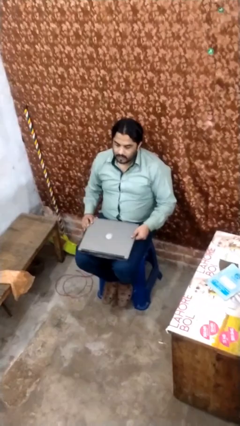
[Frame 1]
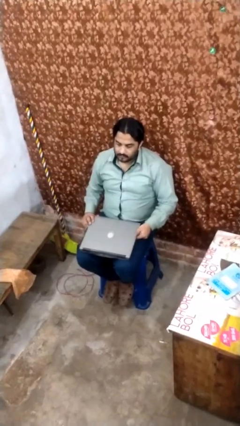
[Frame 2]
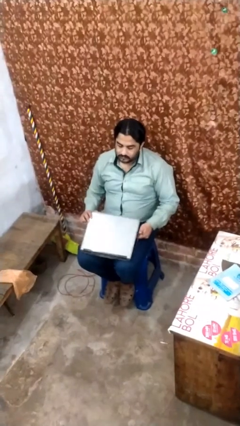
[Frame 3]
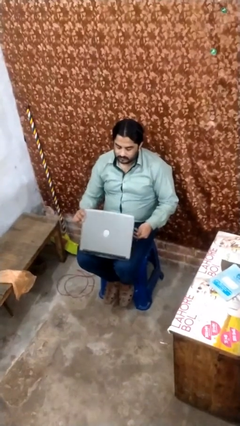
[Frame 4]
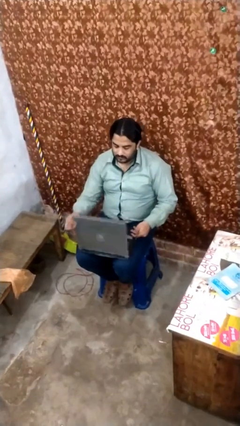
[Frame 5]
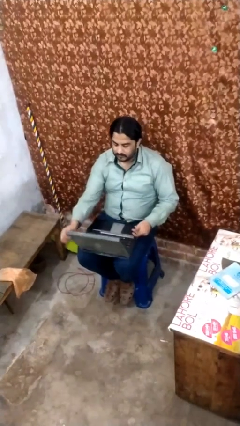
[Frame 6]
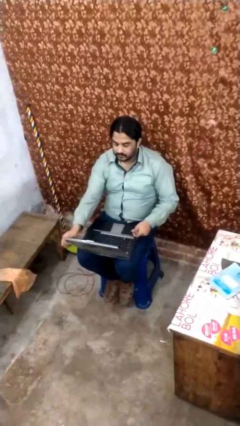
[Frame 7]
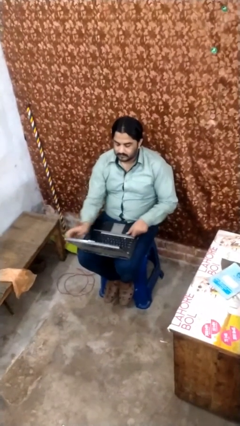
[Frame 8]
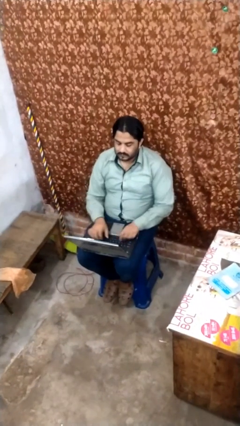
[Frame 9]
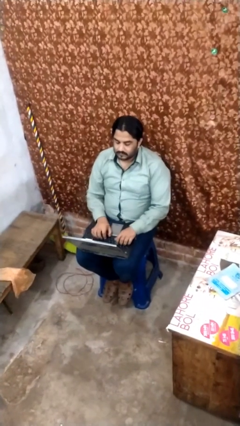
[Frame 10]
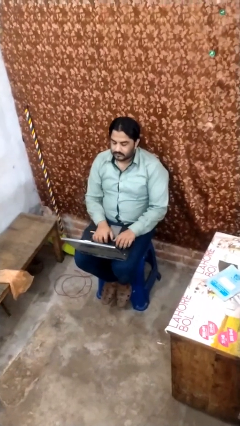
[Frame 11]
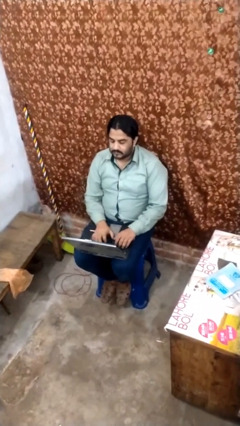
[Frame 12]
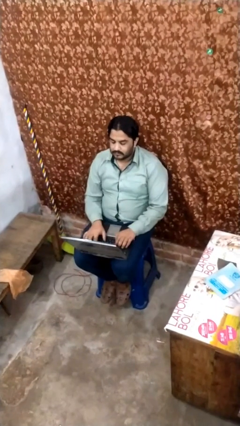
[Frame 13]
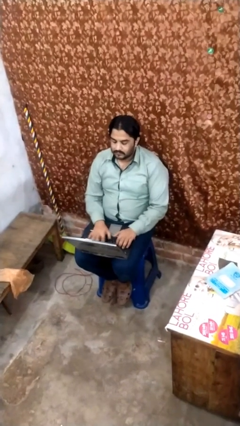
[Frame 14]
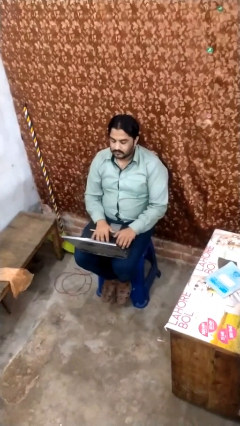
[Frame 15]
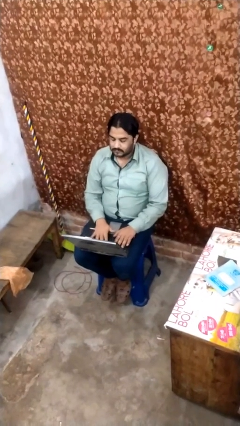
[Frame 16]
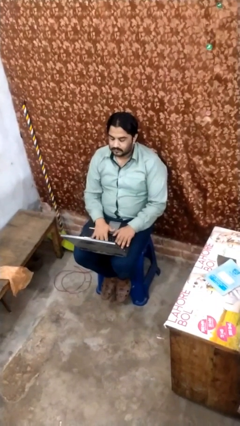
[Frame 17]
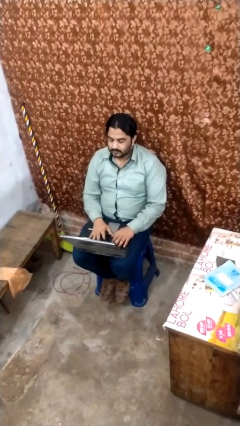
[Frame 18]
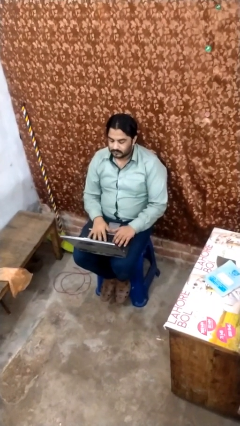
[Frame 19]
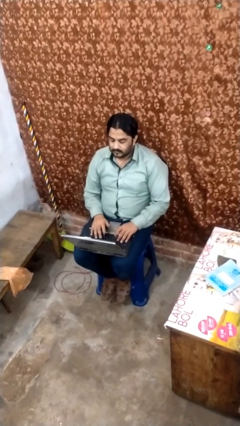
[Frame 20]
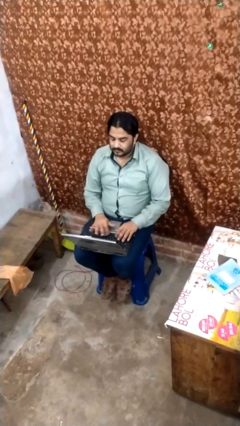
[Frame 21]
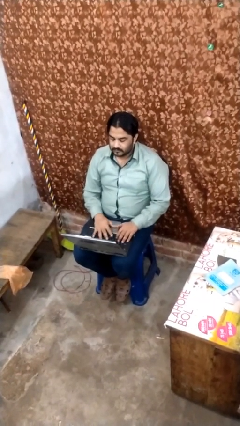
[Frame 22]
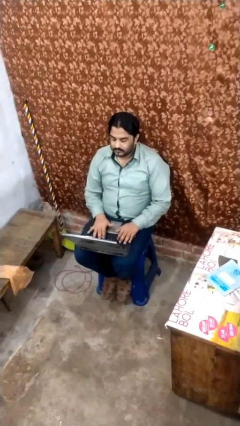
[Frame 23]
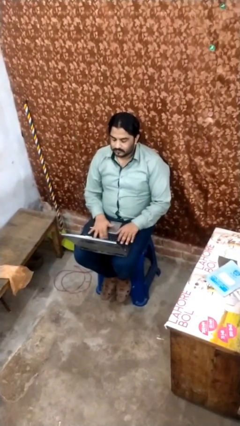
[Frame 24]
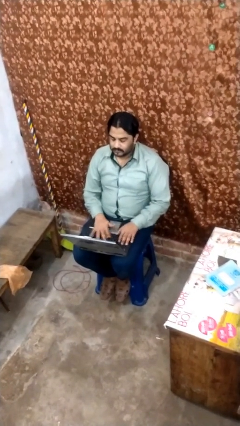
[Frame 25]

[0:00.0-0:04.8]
person interacts with laptop

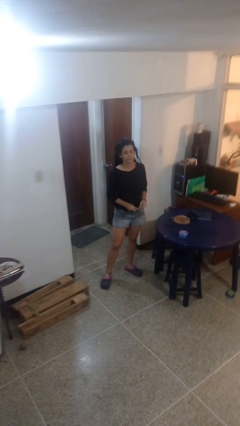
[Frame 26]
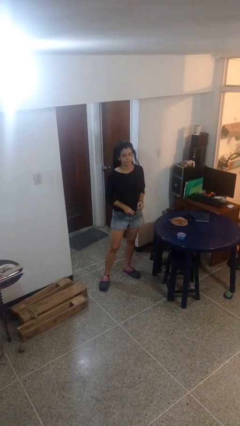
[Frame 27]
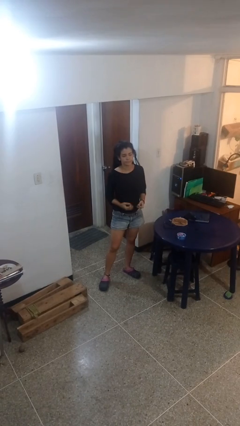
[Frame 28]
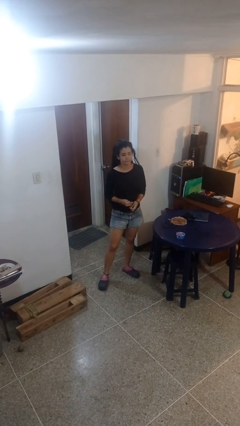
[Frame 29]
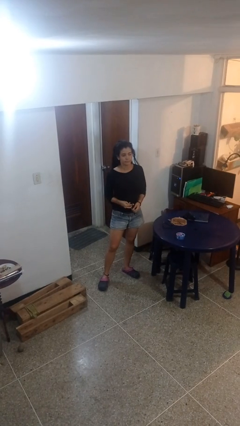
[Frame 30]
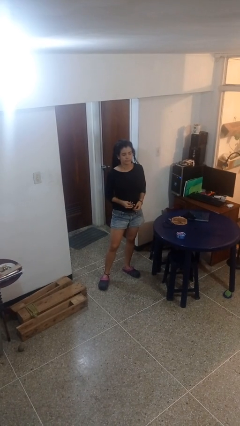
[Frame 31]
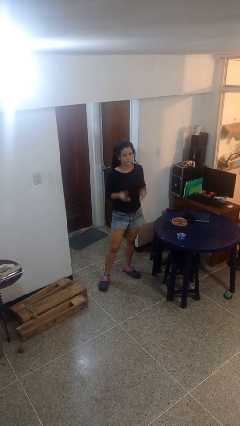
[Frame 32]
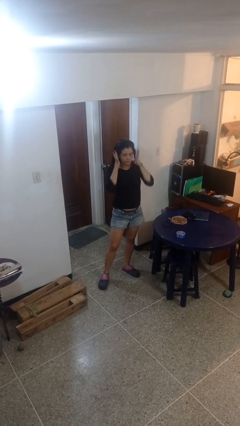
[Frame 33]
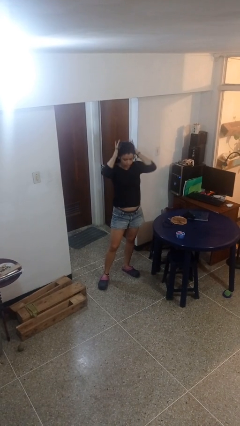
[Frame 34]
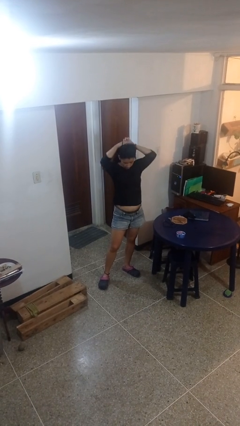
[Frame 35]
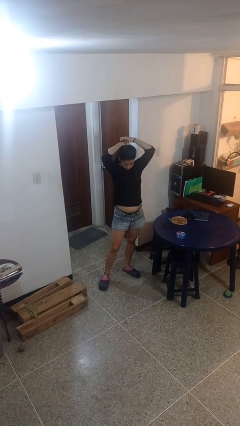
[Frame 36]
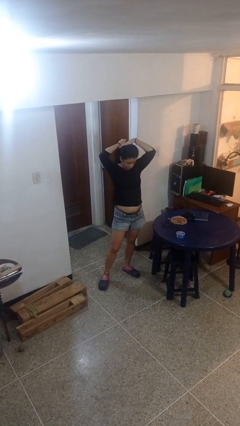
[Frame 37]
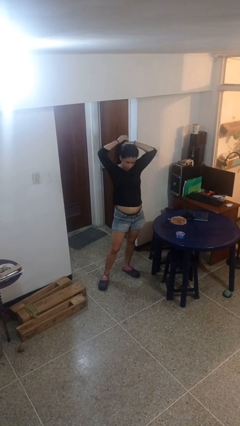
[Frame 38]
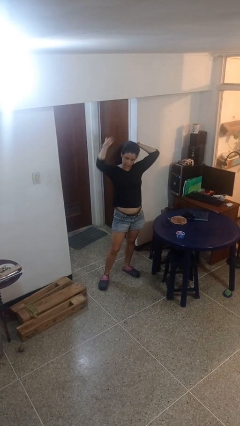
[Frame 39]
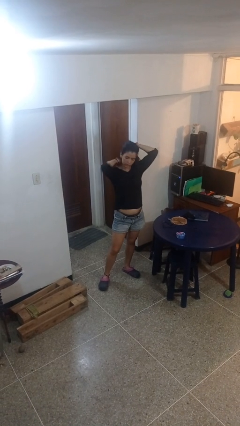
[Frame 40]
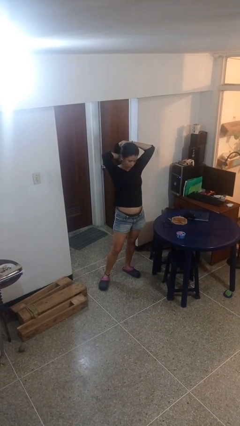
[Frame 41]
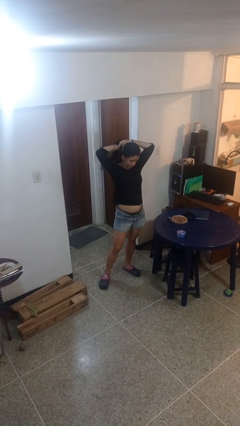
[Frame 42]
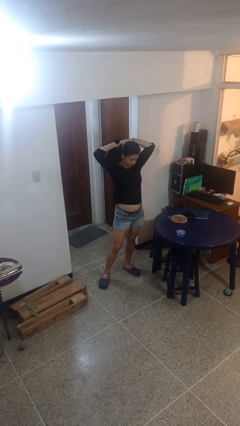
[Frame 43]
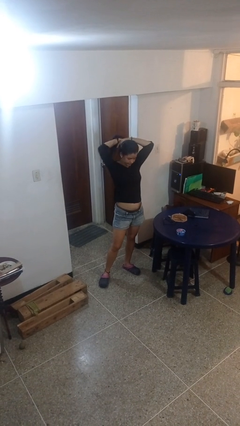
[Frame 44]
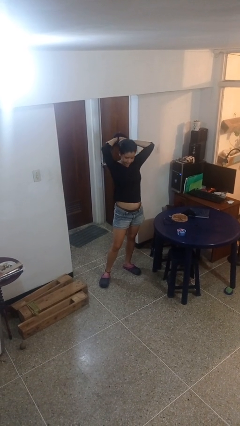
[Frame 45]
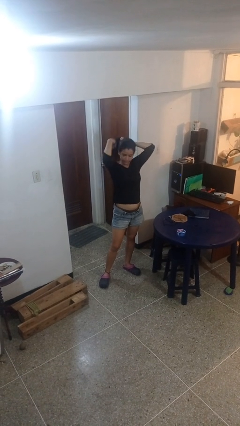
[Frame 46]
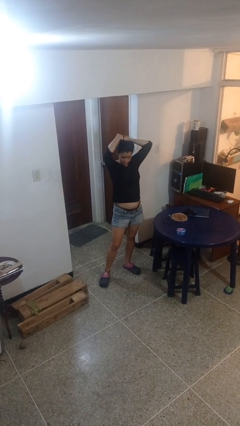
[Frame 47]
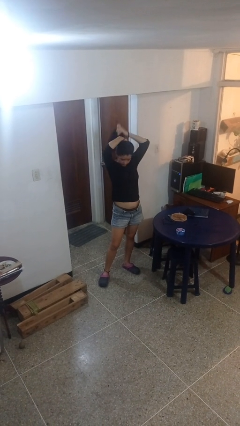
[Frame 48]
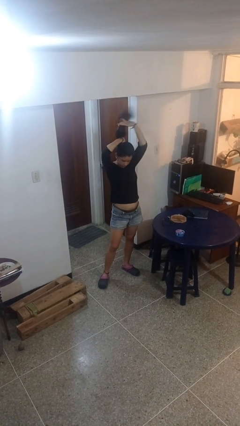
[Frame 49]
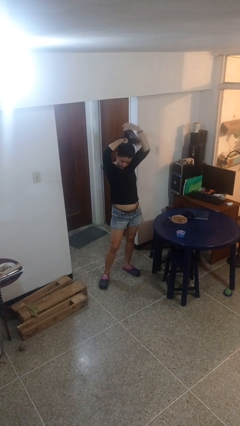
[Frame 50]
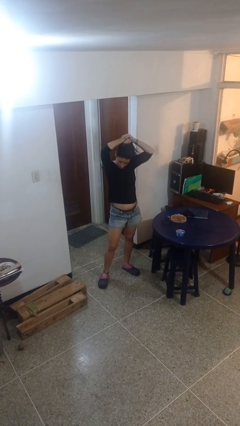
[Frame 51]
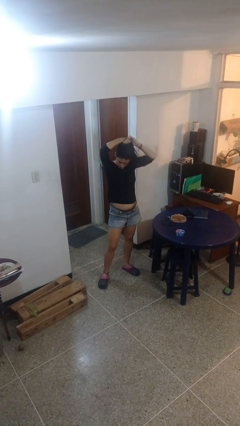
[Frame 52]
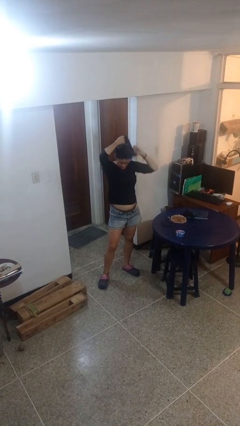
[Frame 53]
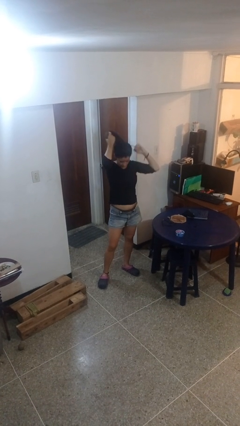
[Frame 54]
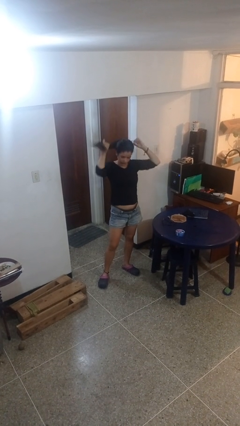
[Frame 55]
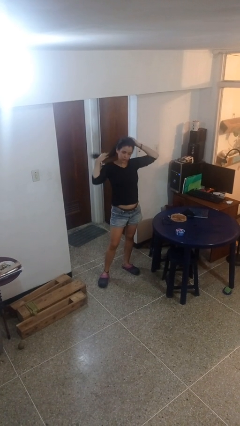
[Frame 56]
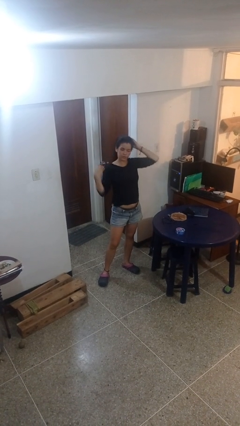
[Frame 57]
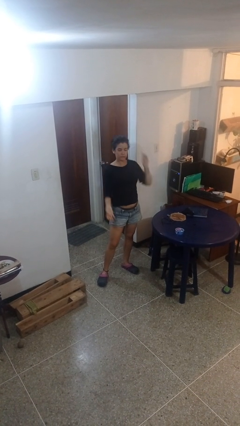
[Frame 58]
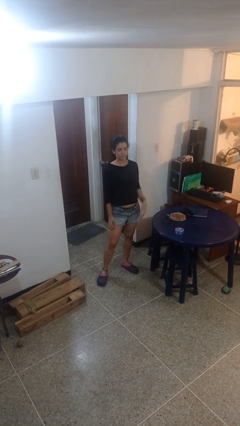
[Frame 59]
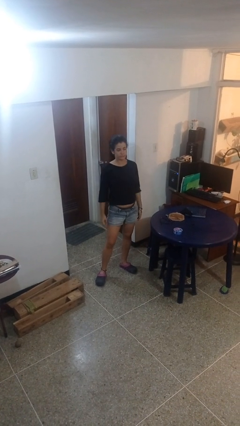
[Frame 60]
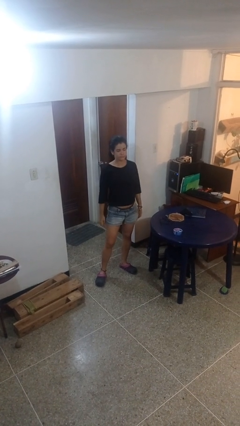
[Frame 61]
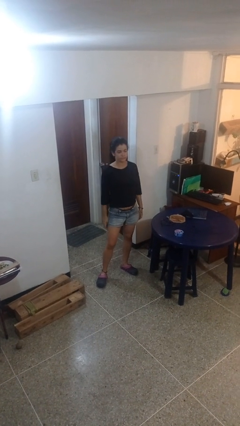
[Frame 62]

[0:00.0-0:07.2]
person puts hair in ponytail

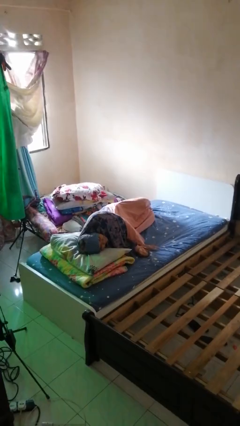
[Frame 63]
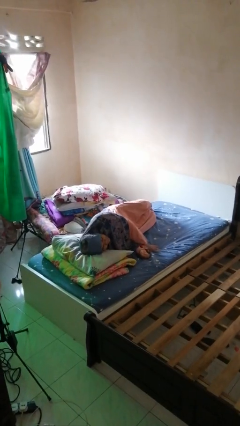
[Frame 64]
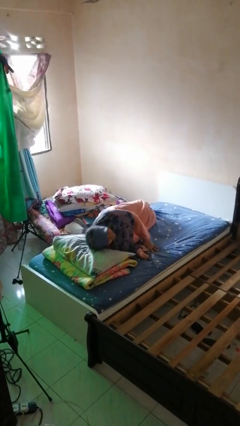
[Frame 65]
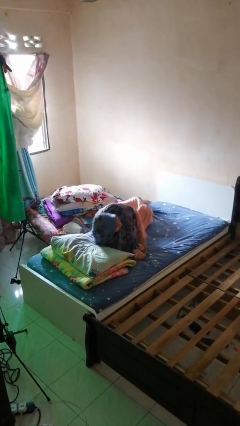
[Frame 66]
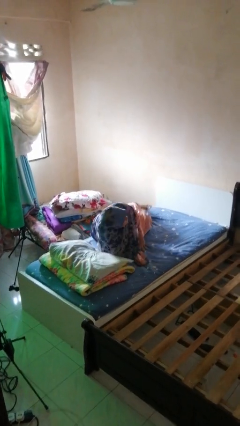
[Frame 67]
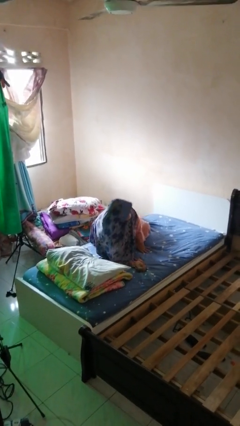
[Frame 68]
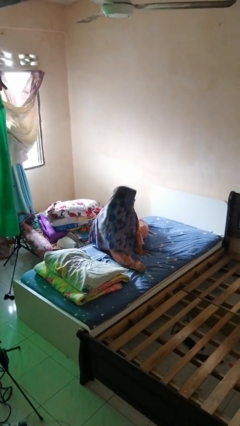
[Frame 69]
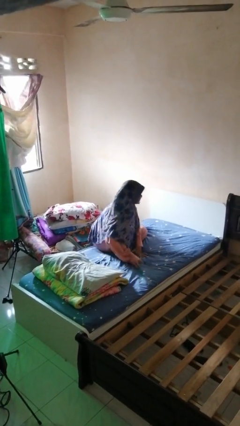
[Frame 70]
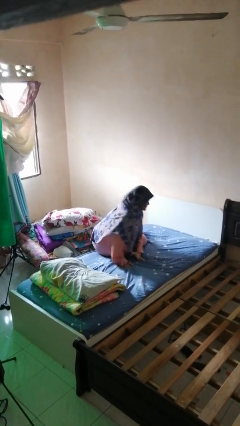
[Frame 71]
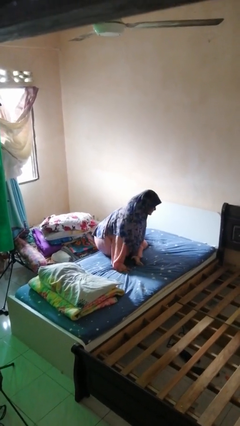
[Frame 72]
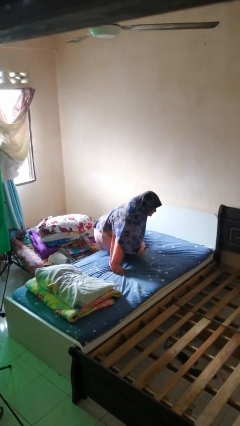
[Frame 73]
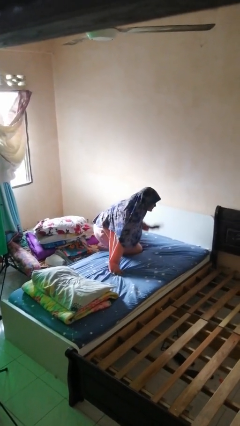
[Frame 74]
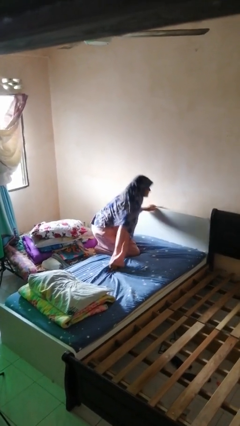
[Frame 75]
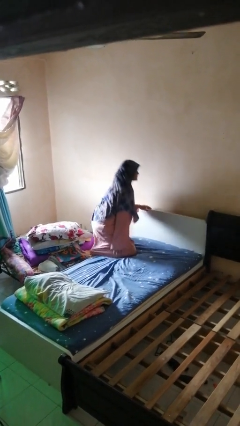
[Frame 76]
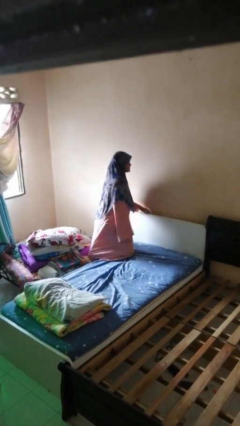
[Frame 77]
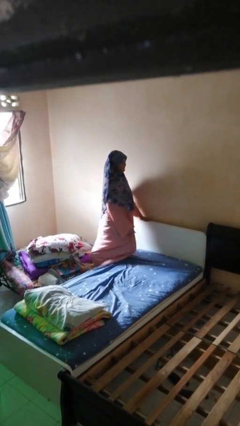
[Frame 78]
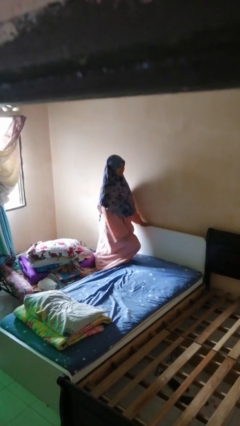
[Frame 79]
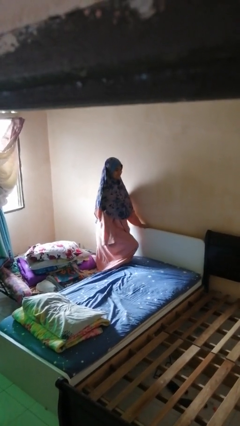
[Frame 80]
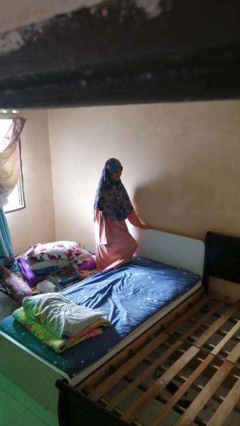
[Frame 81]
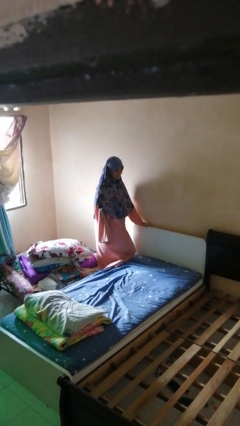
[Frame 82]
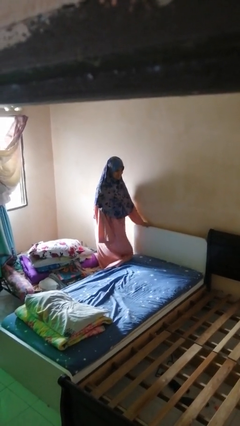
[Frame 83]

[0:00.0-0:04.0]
person stands up

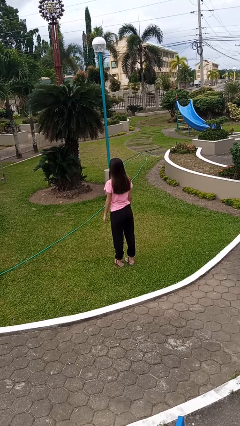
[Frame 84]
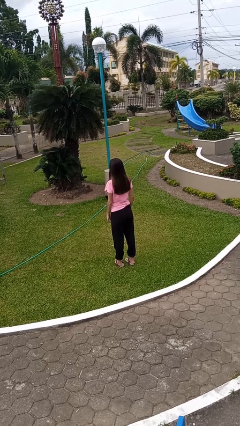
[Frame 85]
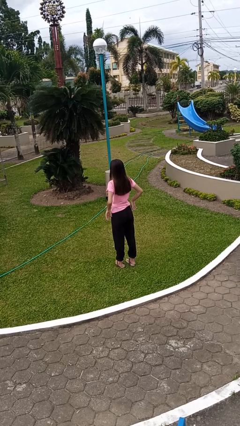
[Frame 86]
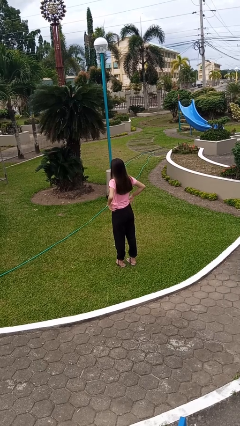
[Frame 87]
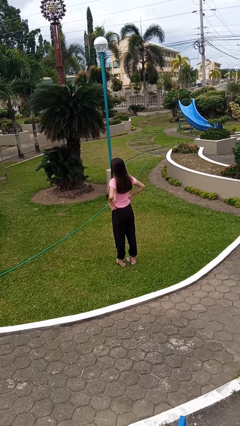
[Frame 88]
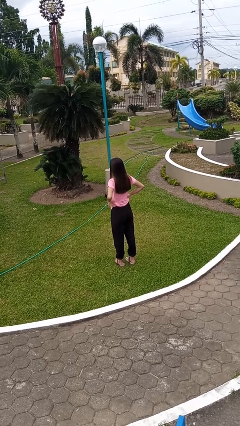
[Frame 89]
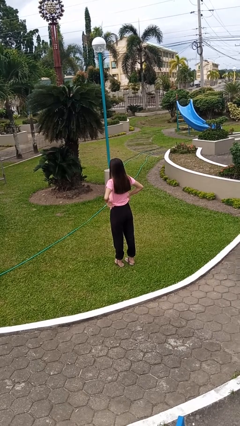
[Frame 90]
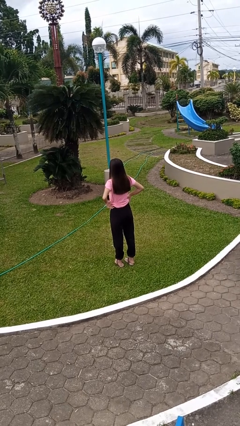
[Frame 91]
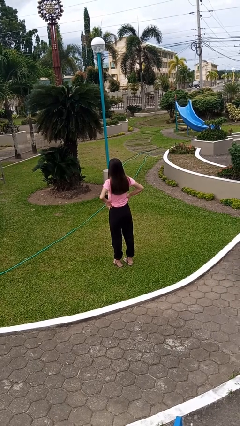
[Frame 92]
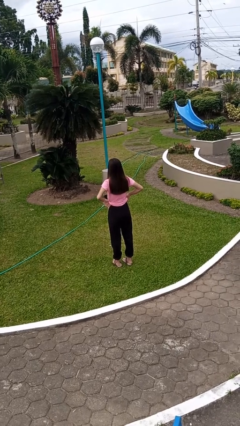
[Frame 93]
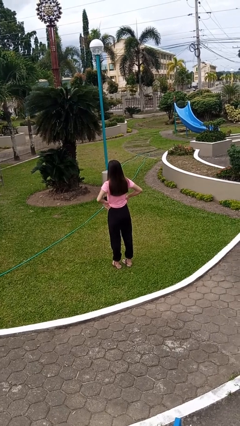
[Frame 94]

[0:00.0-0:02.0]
person hikes up pants
